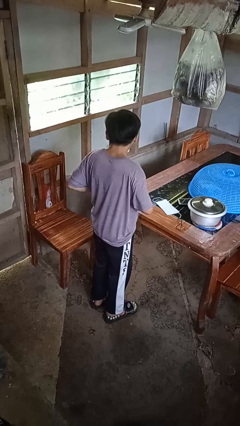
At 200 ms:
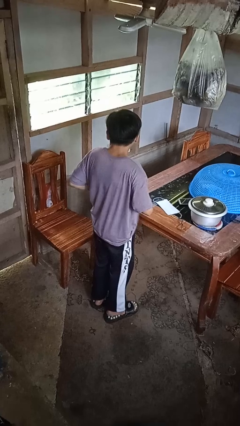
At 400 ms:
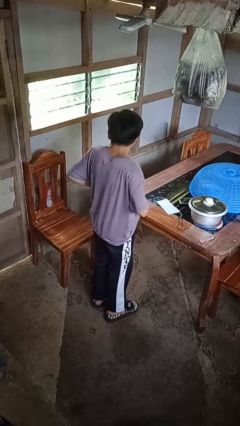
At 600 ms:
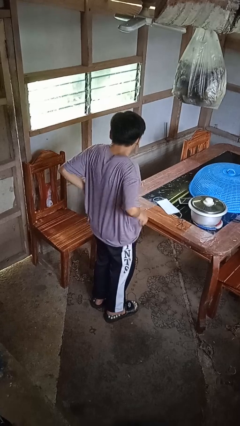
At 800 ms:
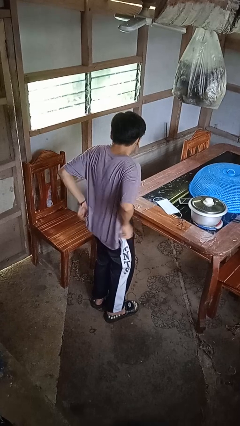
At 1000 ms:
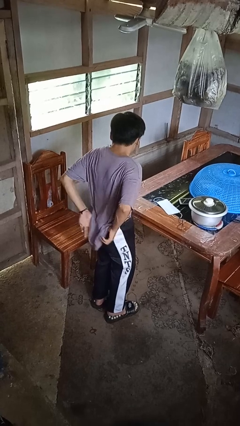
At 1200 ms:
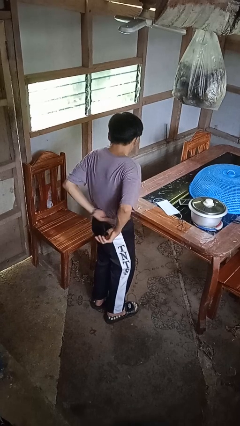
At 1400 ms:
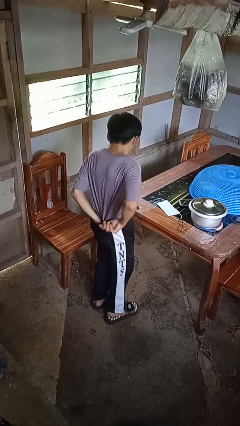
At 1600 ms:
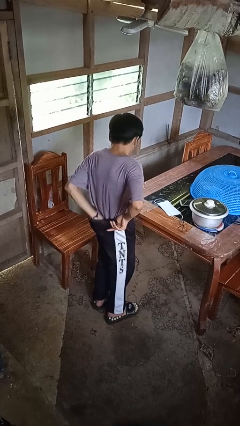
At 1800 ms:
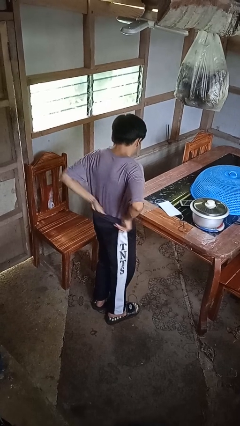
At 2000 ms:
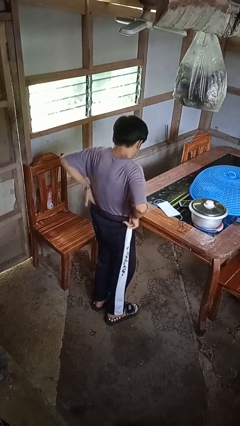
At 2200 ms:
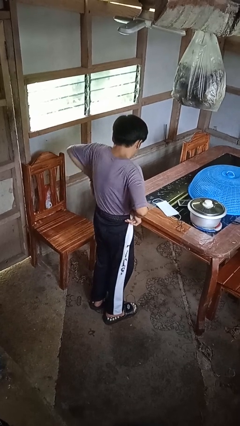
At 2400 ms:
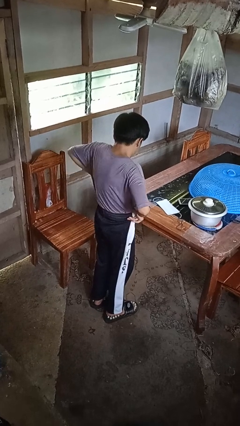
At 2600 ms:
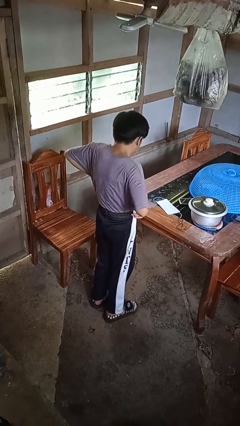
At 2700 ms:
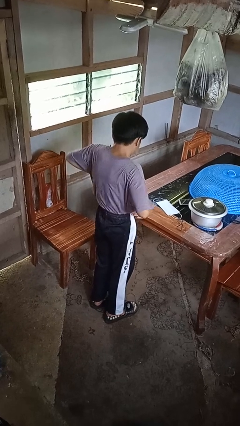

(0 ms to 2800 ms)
person tucks in shirt

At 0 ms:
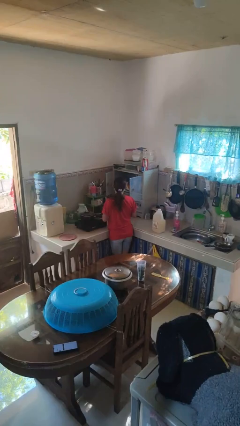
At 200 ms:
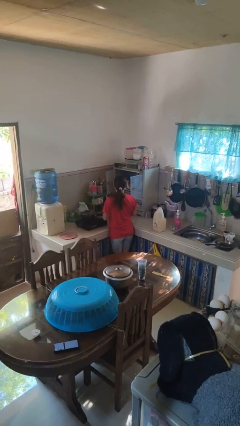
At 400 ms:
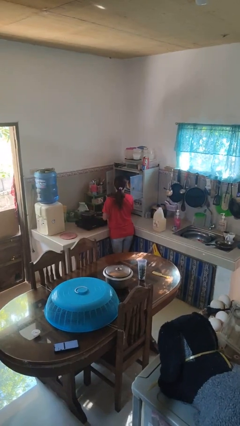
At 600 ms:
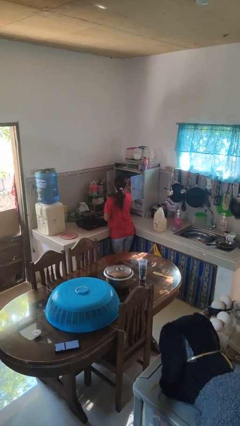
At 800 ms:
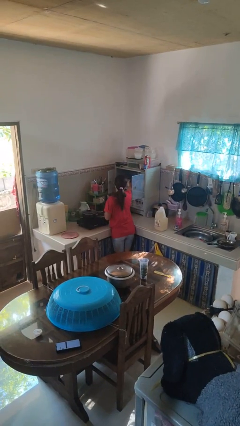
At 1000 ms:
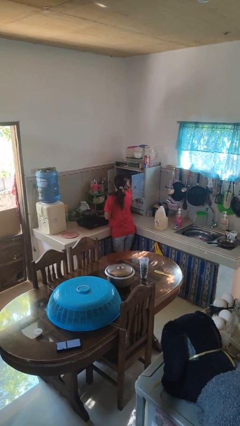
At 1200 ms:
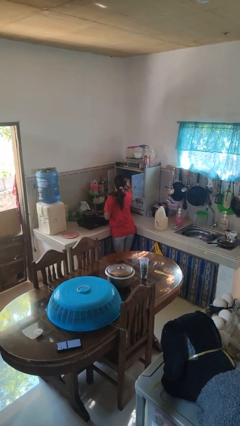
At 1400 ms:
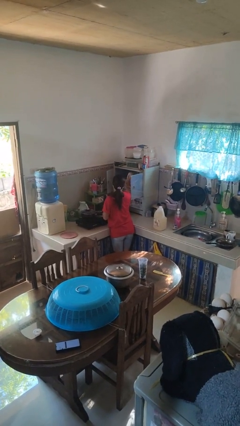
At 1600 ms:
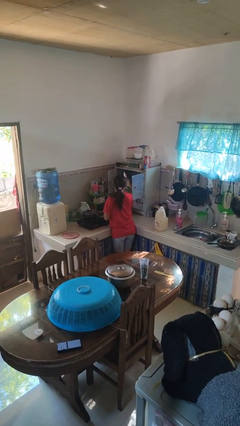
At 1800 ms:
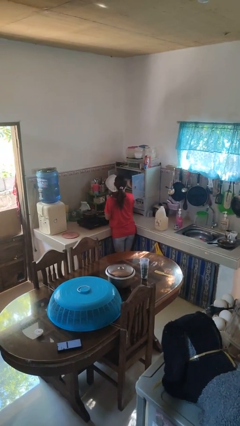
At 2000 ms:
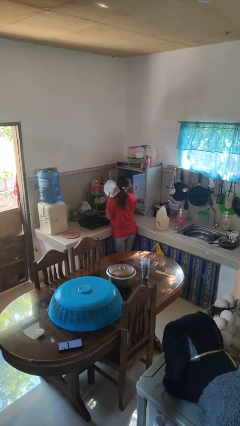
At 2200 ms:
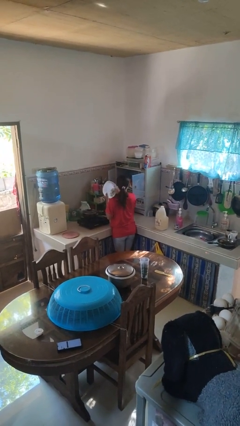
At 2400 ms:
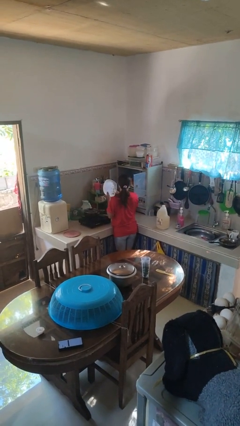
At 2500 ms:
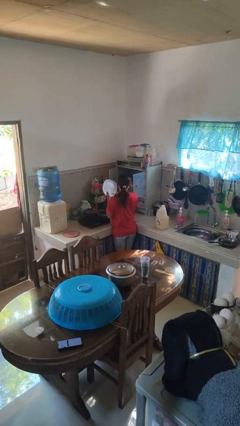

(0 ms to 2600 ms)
person takes object from cabinet

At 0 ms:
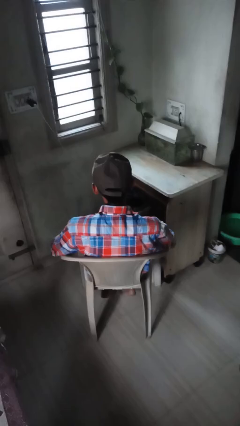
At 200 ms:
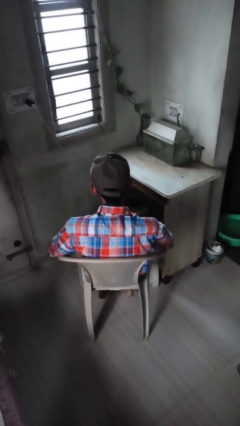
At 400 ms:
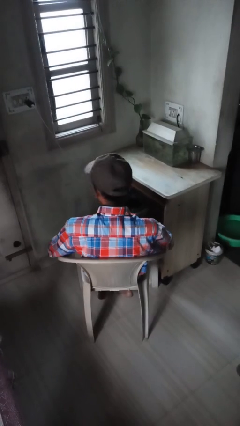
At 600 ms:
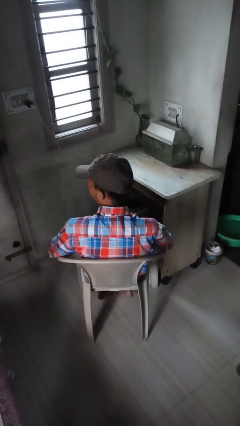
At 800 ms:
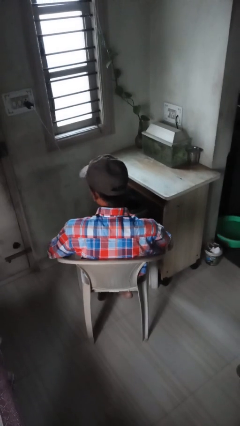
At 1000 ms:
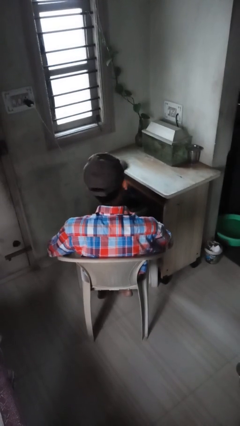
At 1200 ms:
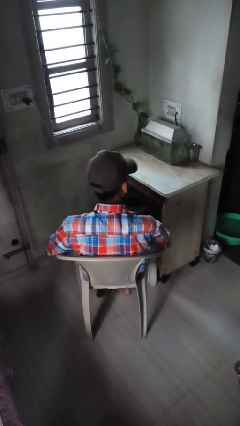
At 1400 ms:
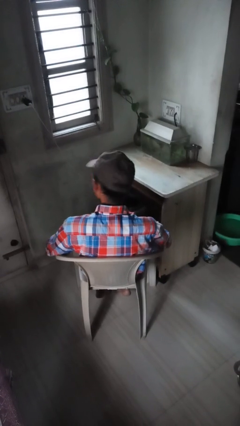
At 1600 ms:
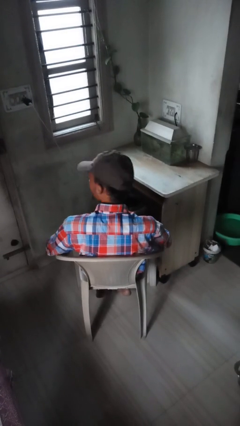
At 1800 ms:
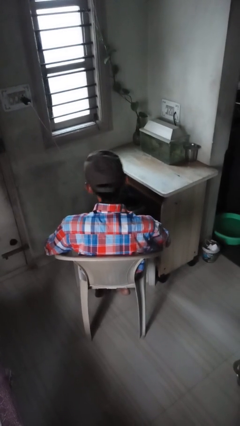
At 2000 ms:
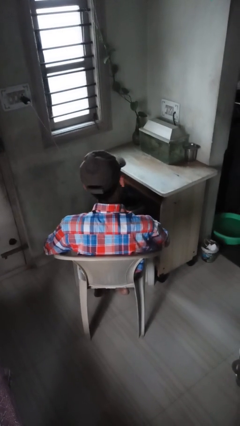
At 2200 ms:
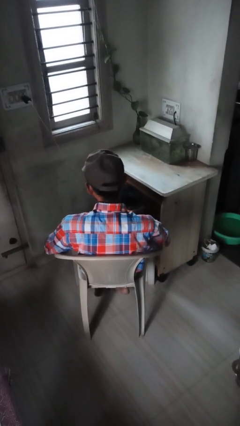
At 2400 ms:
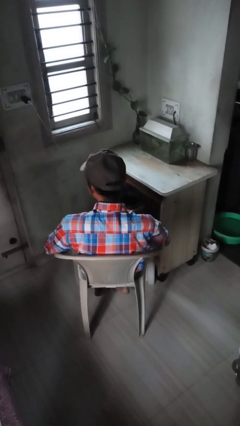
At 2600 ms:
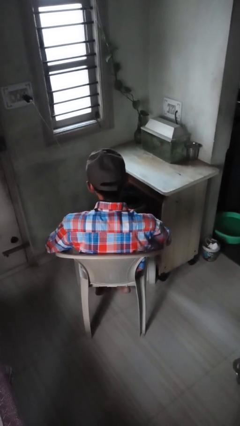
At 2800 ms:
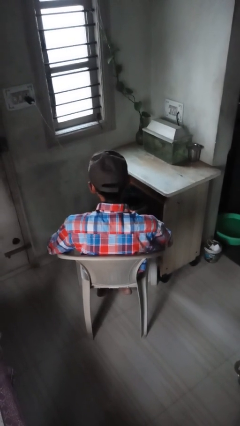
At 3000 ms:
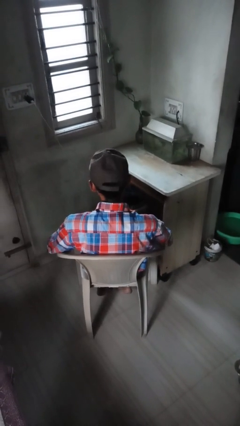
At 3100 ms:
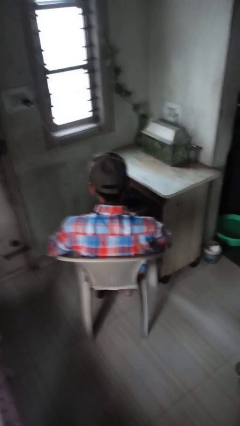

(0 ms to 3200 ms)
person shakes head

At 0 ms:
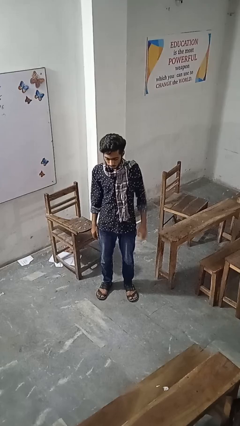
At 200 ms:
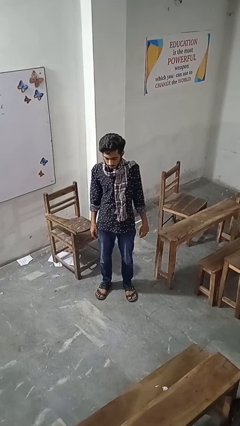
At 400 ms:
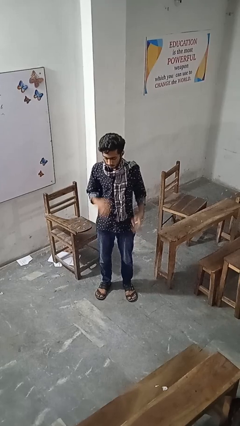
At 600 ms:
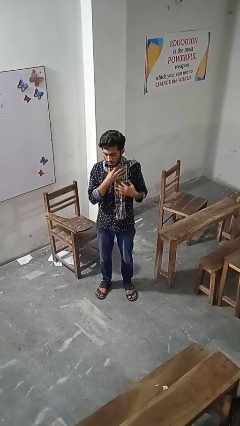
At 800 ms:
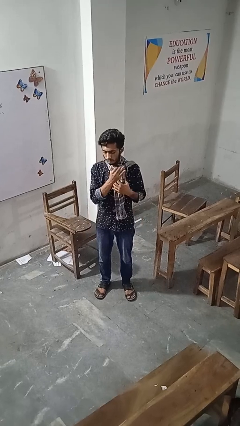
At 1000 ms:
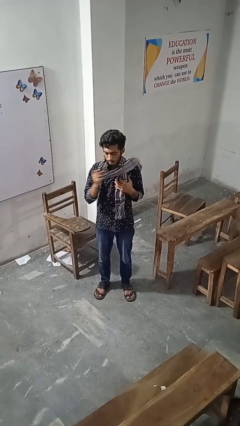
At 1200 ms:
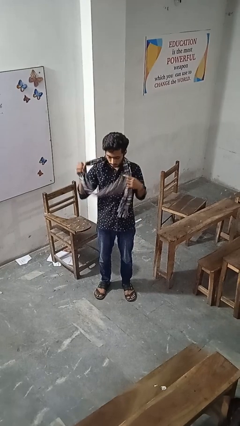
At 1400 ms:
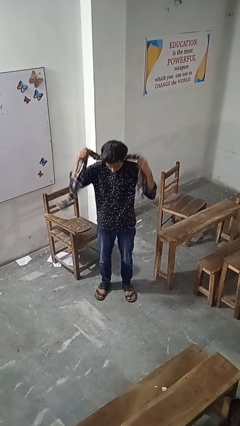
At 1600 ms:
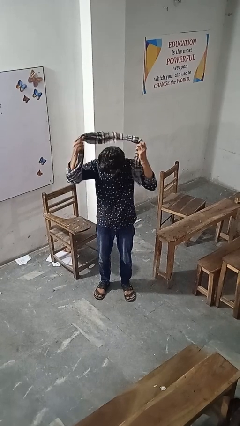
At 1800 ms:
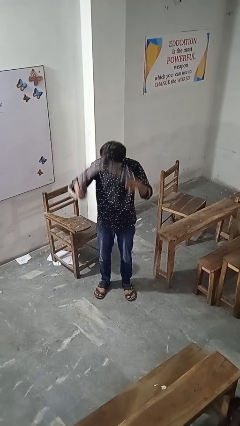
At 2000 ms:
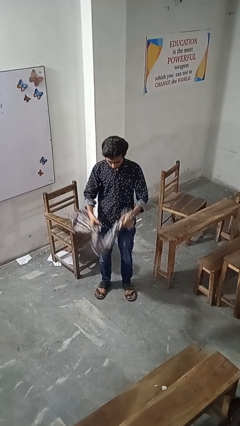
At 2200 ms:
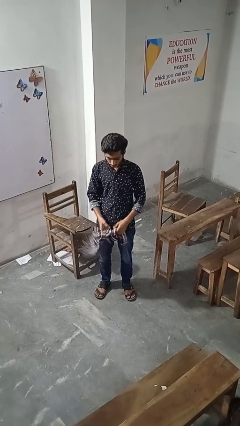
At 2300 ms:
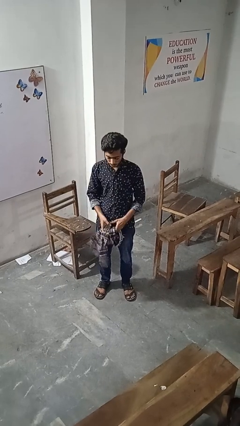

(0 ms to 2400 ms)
person takes off scarf

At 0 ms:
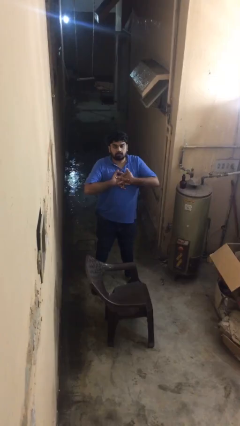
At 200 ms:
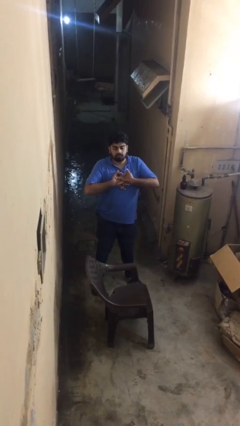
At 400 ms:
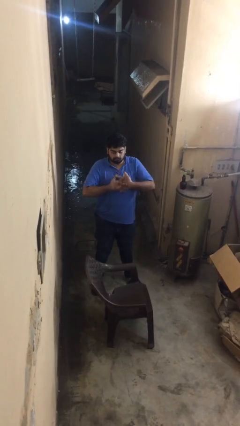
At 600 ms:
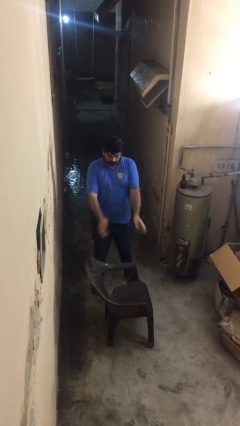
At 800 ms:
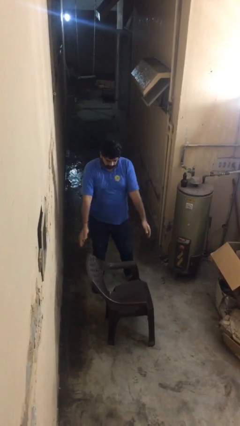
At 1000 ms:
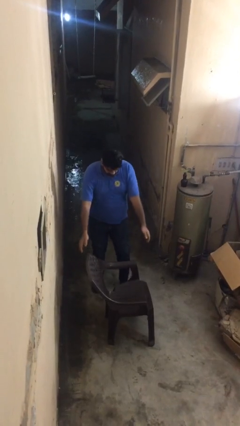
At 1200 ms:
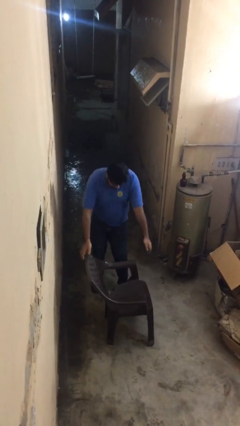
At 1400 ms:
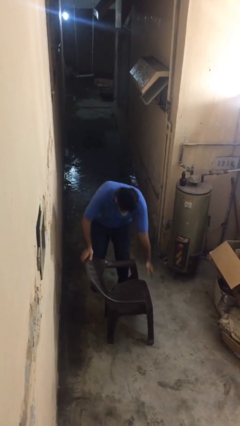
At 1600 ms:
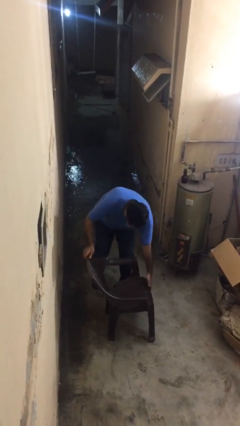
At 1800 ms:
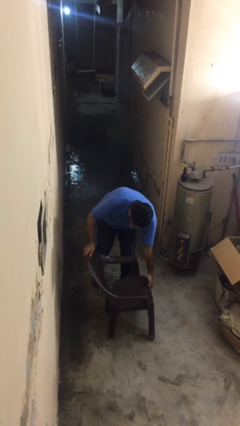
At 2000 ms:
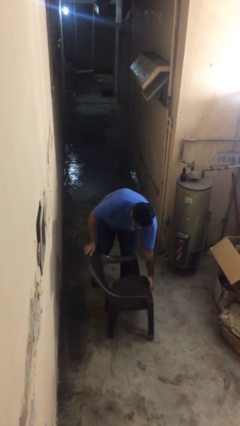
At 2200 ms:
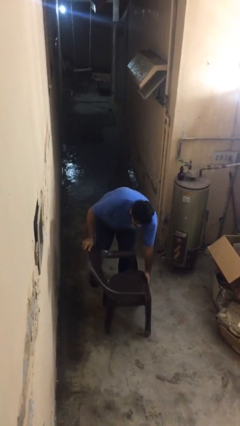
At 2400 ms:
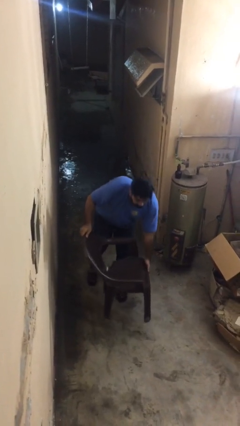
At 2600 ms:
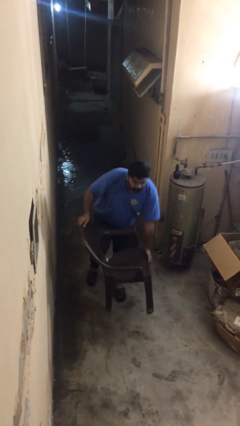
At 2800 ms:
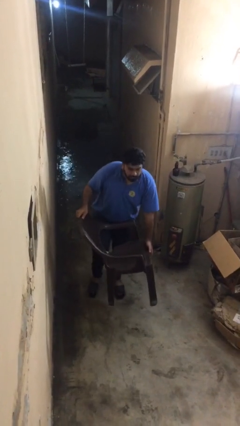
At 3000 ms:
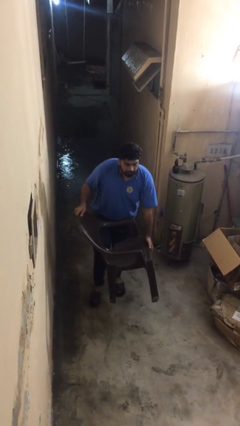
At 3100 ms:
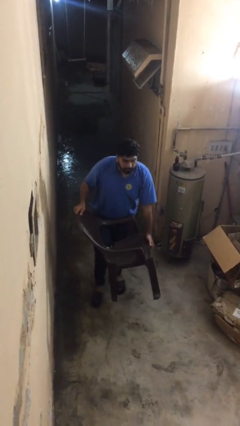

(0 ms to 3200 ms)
person picks up object from floor

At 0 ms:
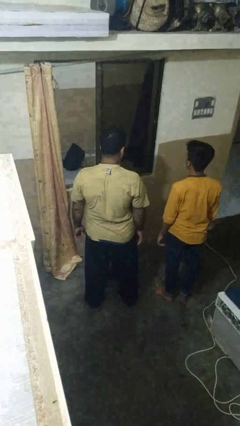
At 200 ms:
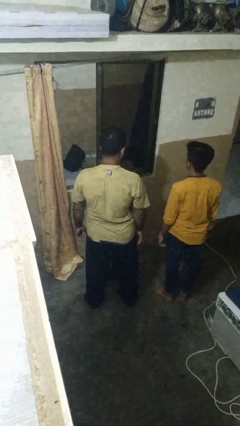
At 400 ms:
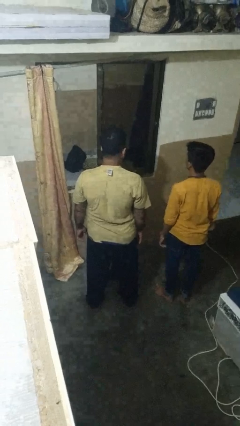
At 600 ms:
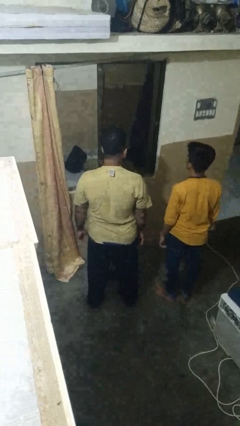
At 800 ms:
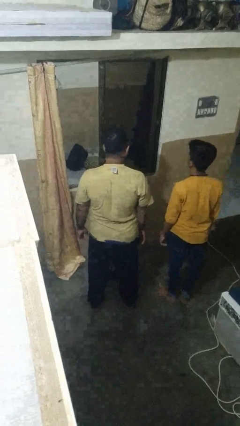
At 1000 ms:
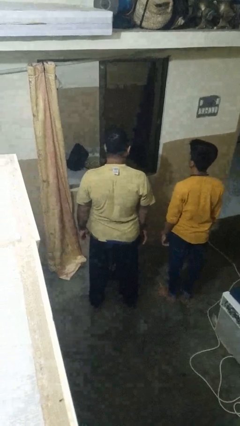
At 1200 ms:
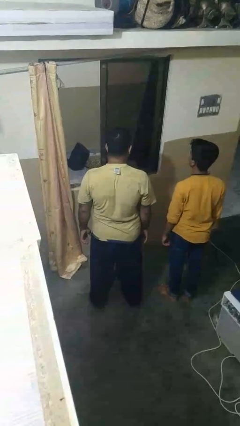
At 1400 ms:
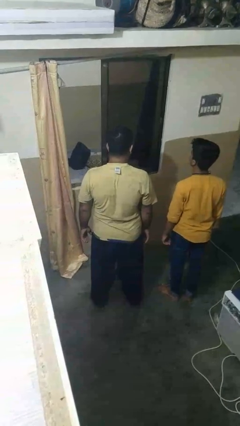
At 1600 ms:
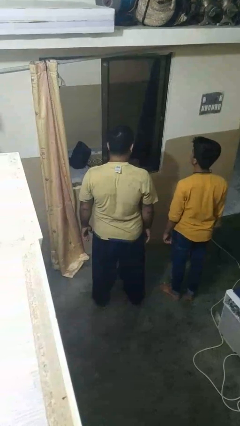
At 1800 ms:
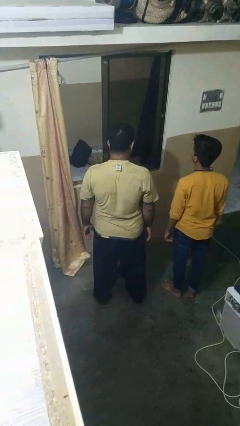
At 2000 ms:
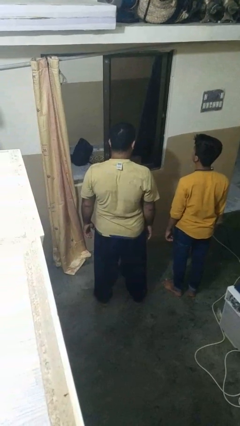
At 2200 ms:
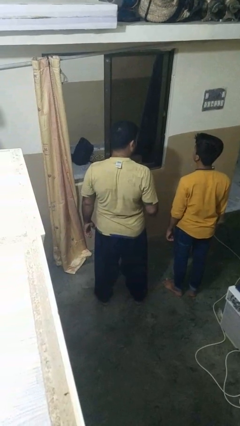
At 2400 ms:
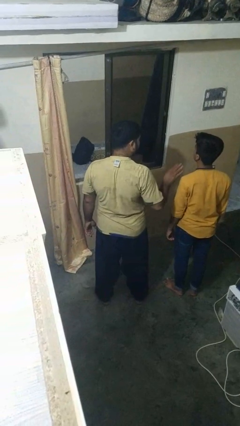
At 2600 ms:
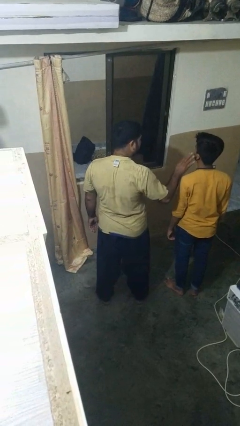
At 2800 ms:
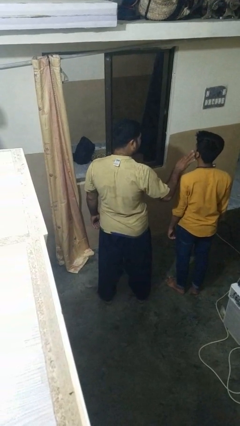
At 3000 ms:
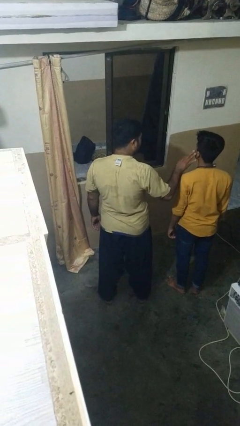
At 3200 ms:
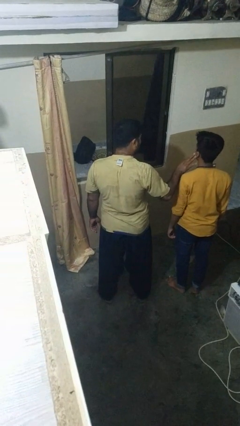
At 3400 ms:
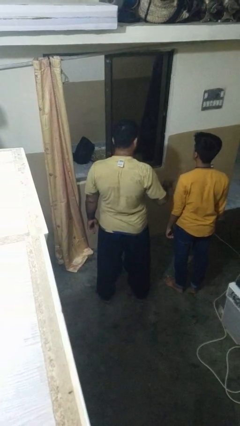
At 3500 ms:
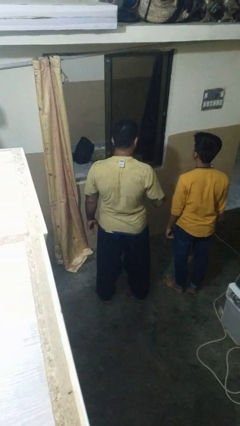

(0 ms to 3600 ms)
person touches face of person
